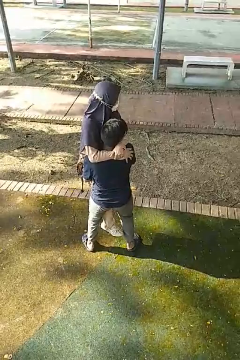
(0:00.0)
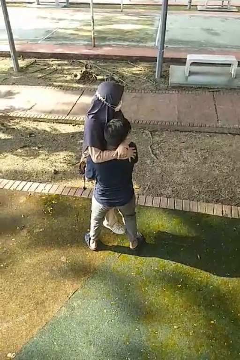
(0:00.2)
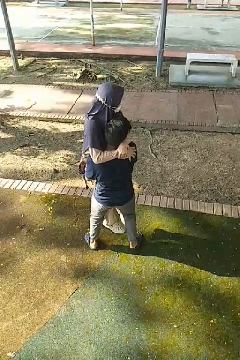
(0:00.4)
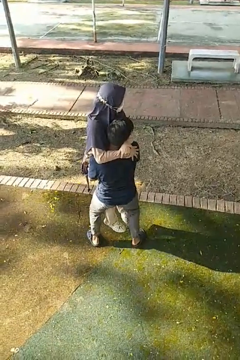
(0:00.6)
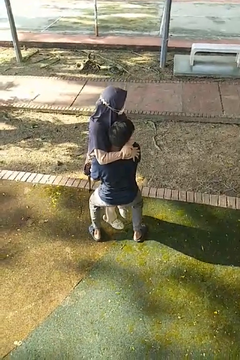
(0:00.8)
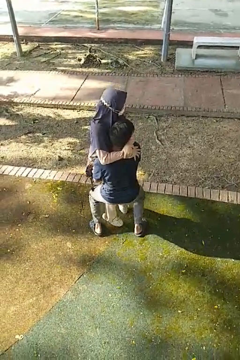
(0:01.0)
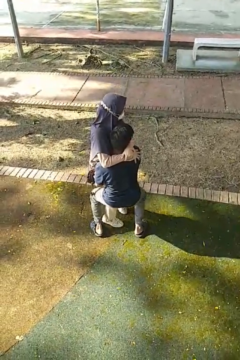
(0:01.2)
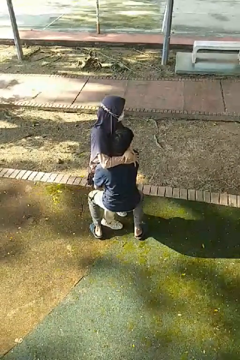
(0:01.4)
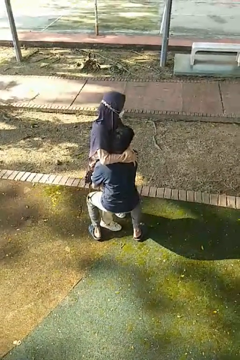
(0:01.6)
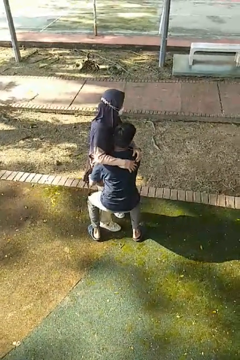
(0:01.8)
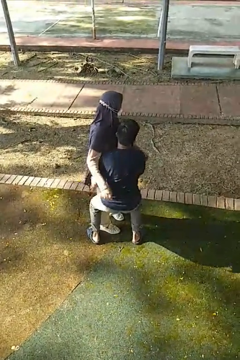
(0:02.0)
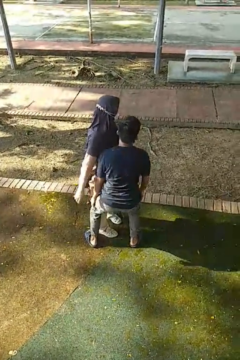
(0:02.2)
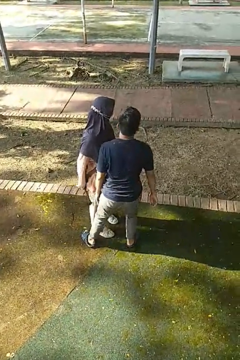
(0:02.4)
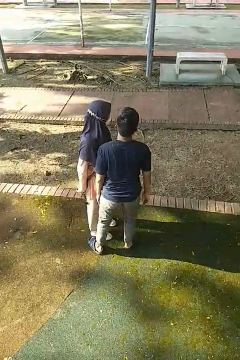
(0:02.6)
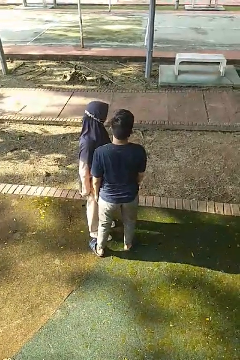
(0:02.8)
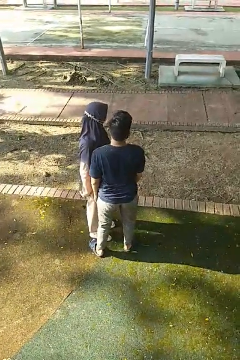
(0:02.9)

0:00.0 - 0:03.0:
person puts down person

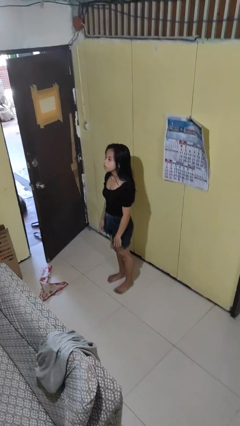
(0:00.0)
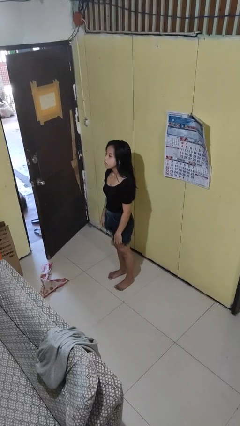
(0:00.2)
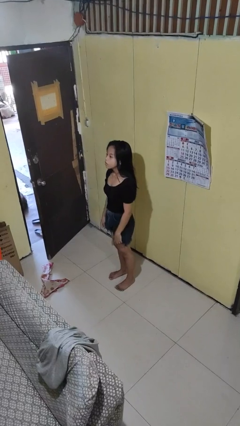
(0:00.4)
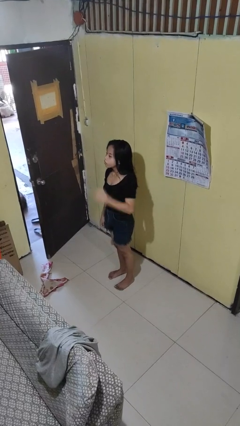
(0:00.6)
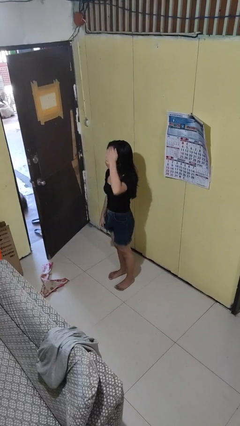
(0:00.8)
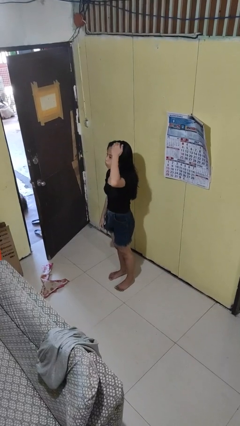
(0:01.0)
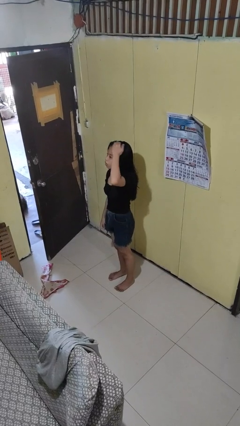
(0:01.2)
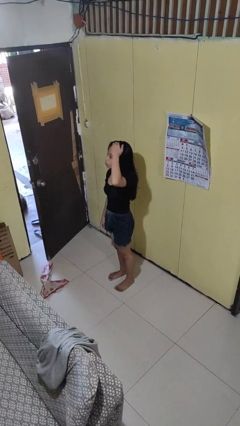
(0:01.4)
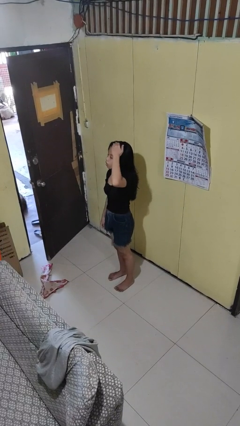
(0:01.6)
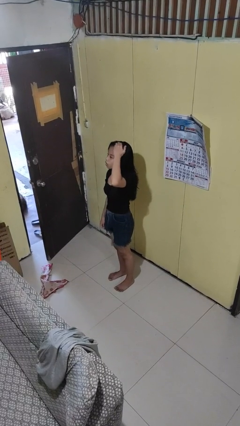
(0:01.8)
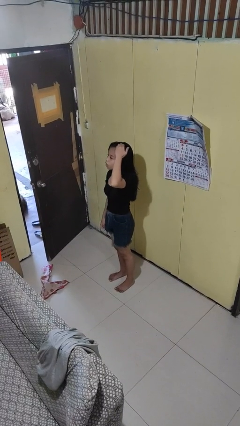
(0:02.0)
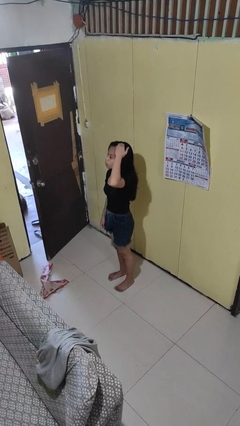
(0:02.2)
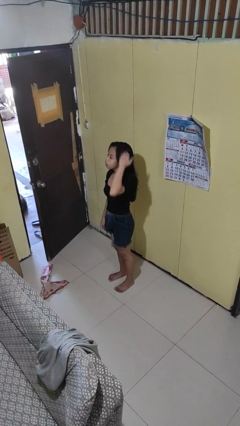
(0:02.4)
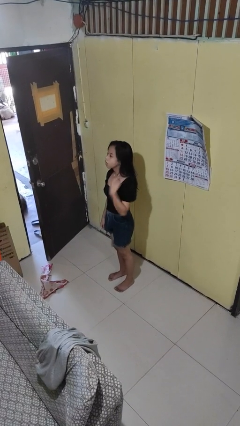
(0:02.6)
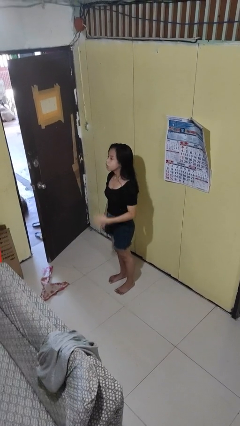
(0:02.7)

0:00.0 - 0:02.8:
person scratches face

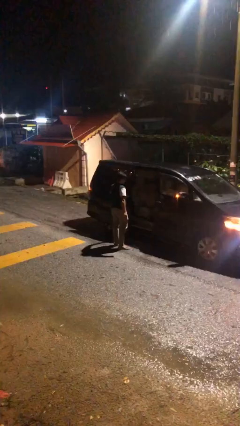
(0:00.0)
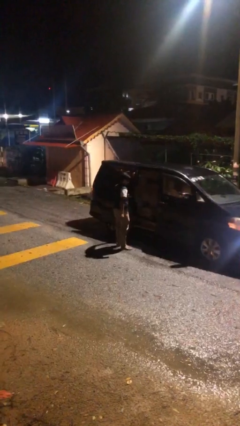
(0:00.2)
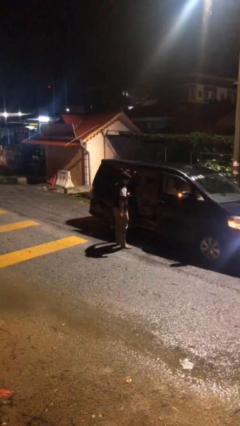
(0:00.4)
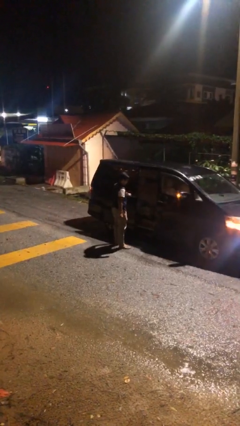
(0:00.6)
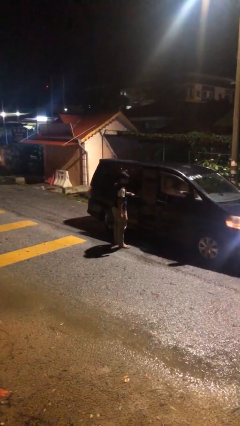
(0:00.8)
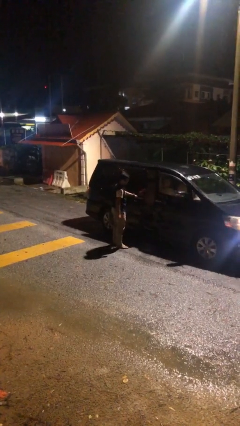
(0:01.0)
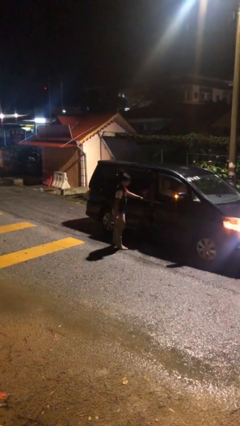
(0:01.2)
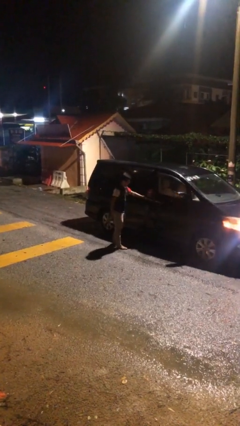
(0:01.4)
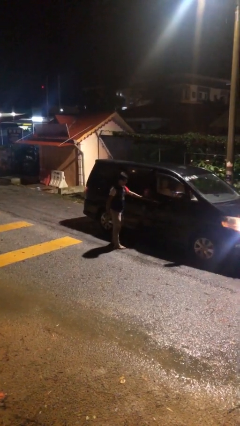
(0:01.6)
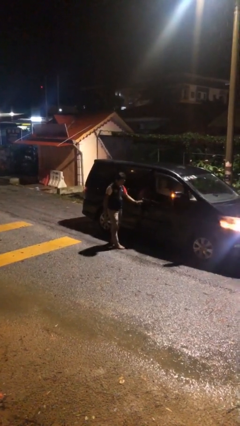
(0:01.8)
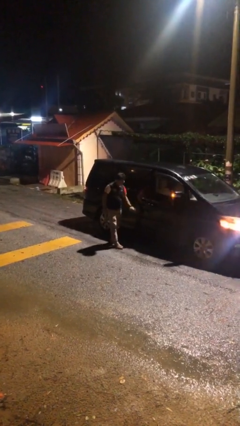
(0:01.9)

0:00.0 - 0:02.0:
person closes car door

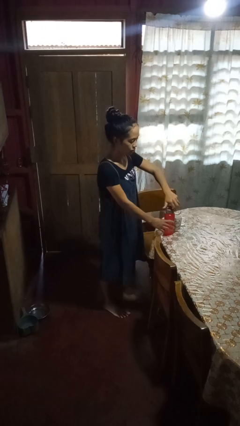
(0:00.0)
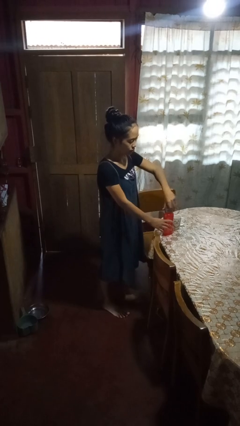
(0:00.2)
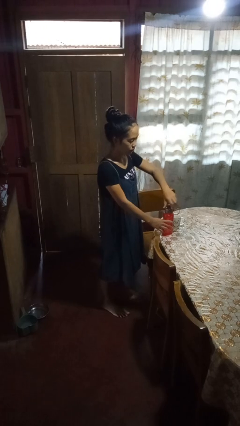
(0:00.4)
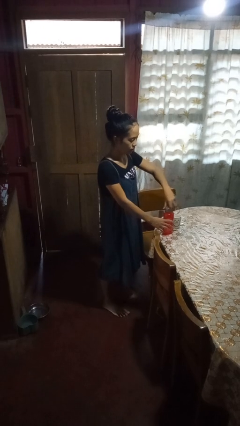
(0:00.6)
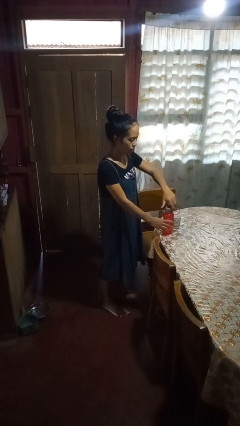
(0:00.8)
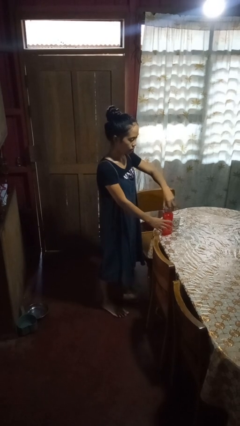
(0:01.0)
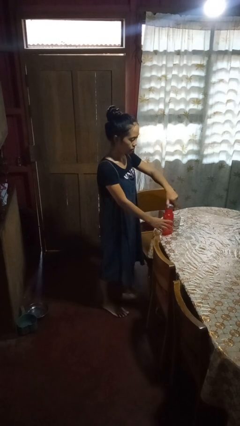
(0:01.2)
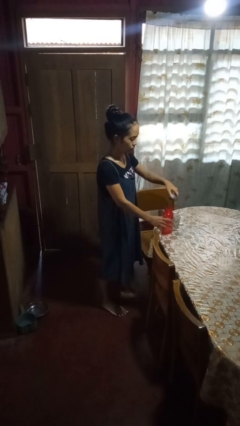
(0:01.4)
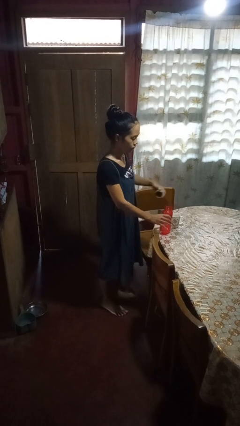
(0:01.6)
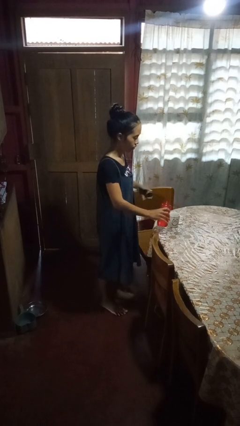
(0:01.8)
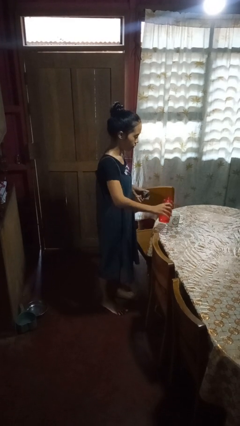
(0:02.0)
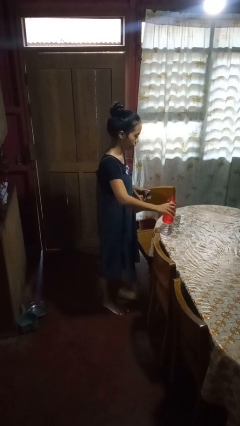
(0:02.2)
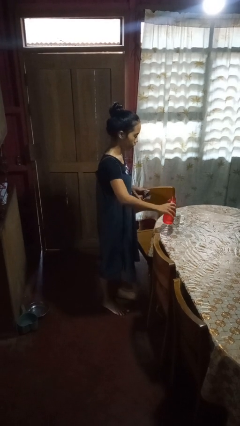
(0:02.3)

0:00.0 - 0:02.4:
person unscrews lid from bottle

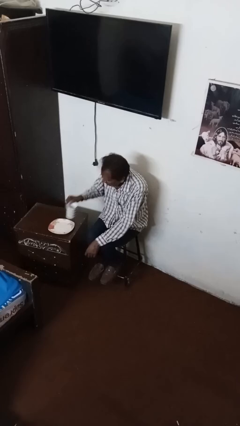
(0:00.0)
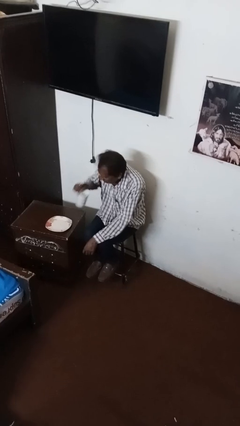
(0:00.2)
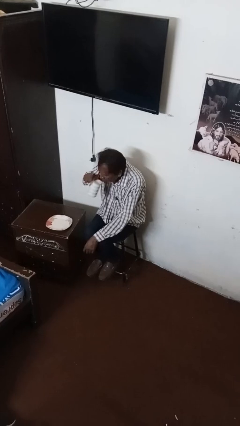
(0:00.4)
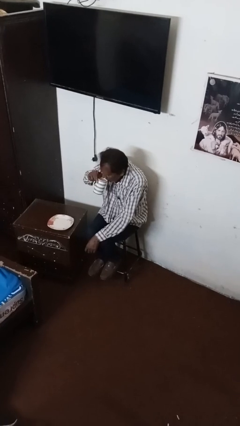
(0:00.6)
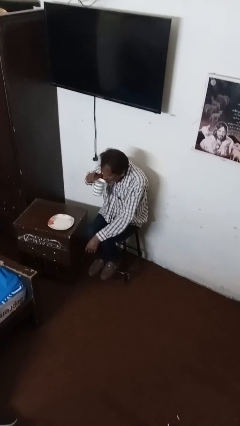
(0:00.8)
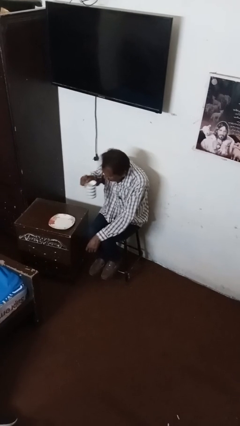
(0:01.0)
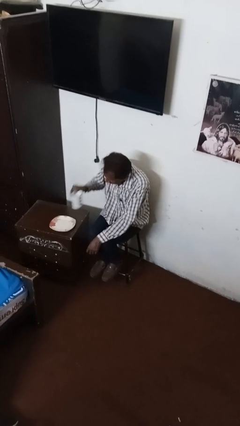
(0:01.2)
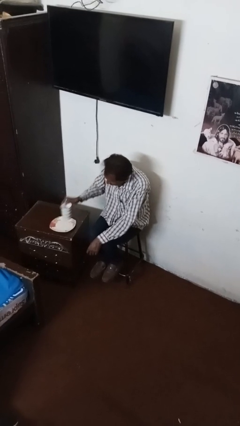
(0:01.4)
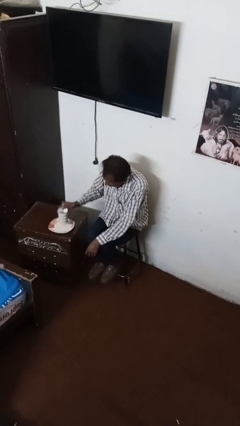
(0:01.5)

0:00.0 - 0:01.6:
person drinks from mug

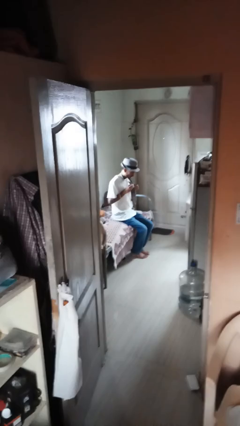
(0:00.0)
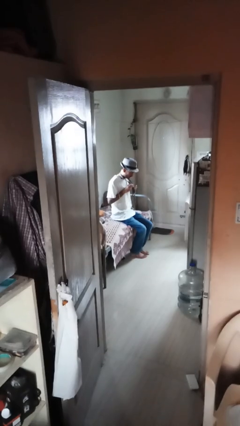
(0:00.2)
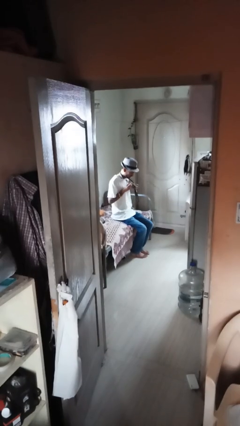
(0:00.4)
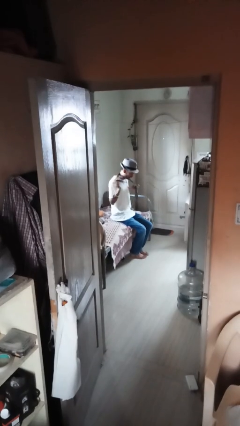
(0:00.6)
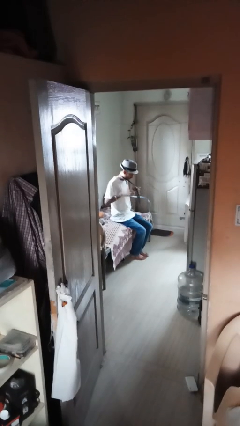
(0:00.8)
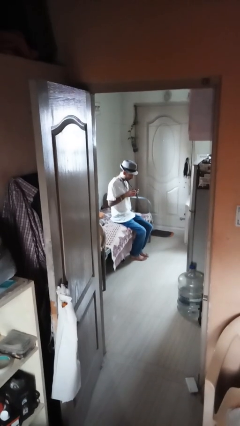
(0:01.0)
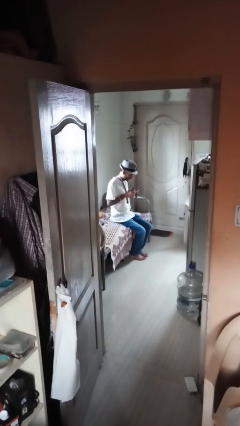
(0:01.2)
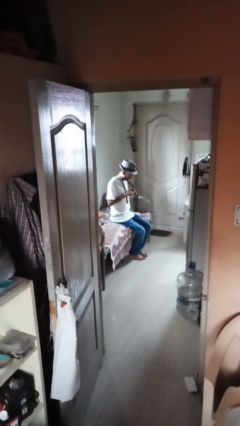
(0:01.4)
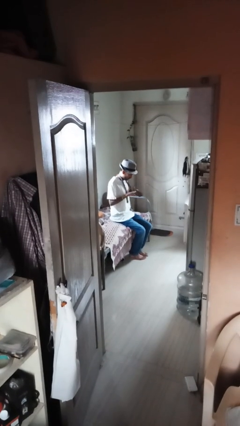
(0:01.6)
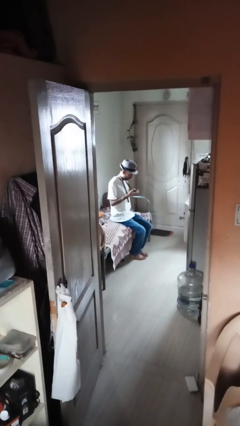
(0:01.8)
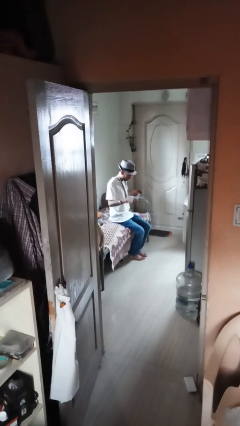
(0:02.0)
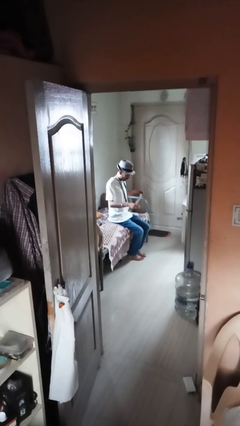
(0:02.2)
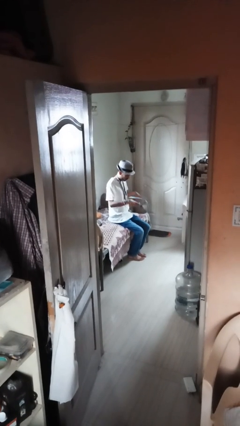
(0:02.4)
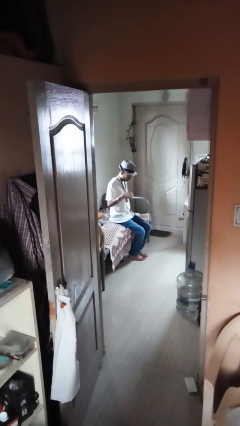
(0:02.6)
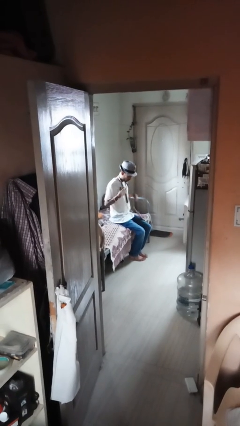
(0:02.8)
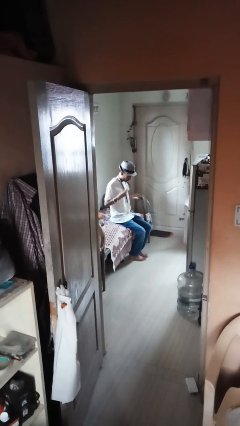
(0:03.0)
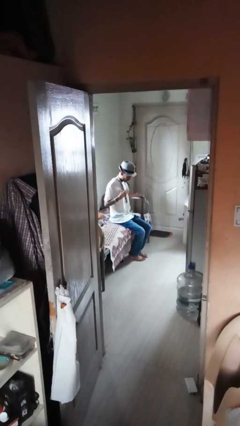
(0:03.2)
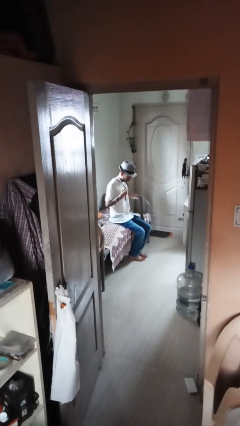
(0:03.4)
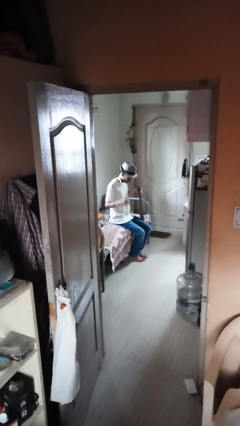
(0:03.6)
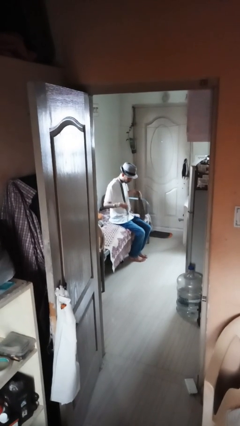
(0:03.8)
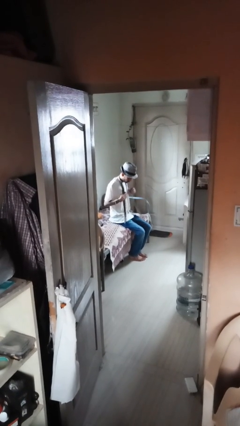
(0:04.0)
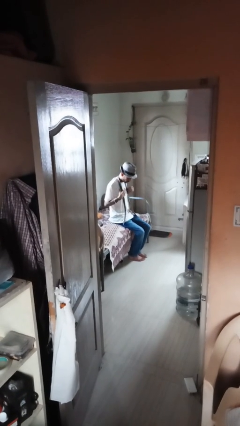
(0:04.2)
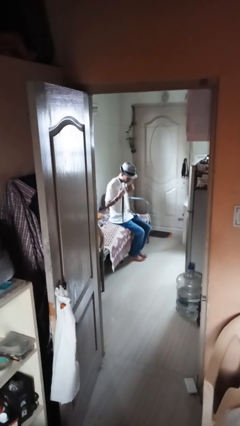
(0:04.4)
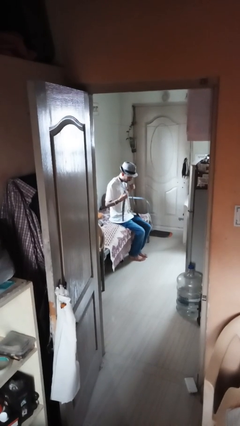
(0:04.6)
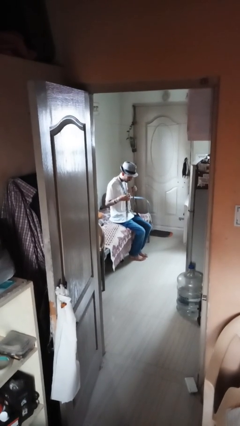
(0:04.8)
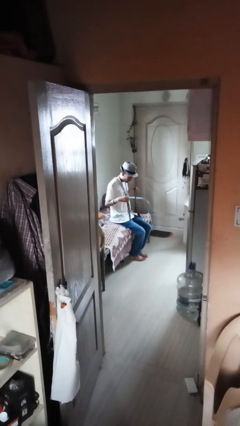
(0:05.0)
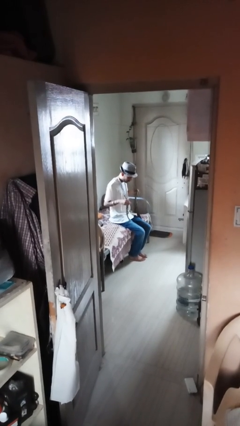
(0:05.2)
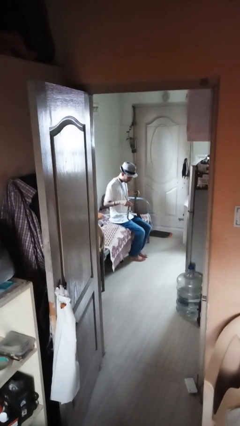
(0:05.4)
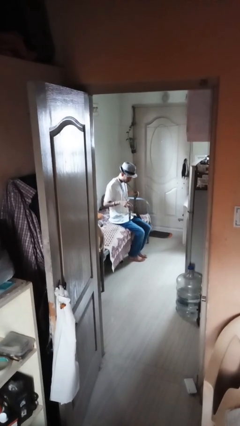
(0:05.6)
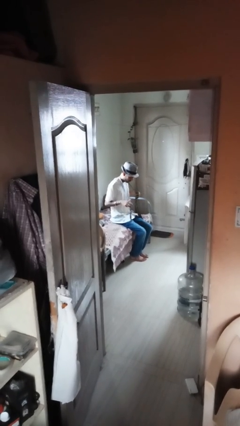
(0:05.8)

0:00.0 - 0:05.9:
person takes off necktie
